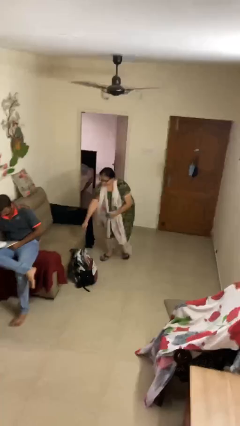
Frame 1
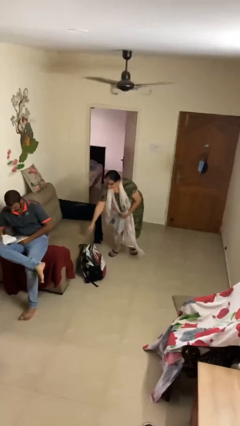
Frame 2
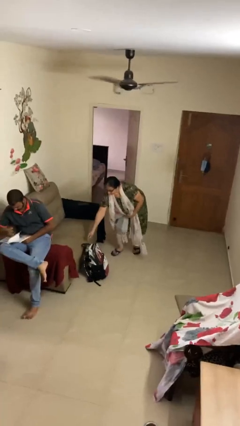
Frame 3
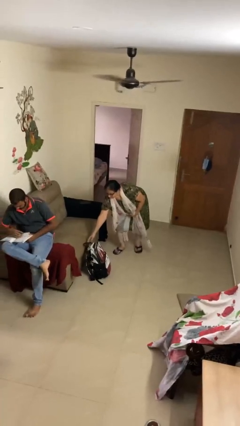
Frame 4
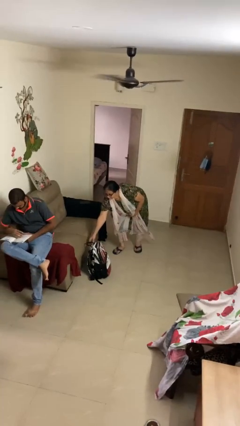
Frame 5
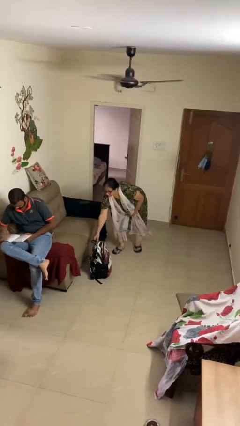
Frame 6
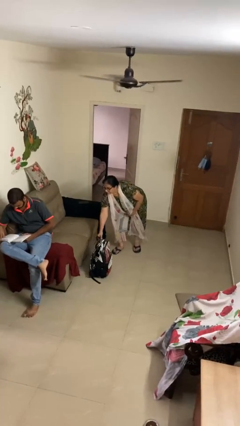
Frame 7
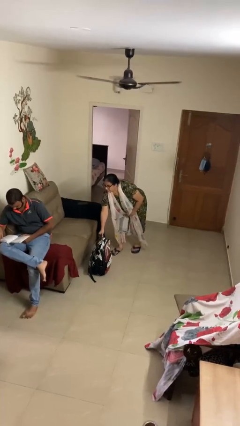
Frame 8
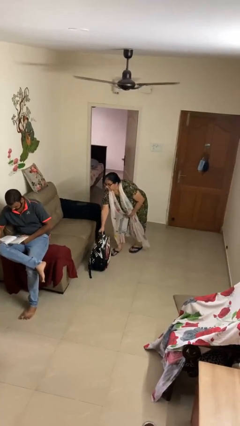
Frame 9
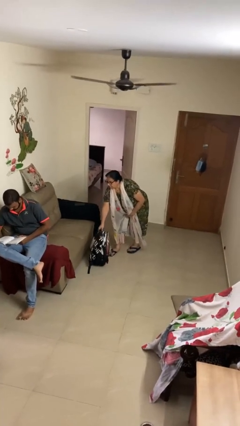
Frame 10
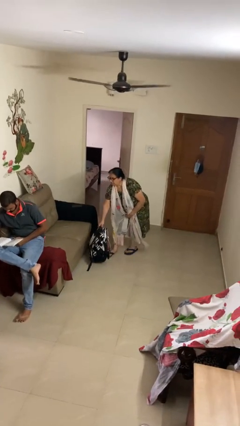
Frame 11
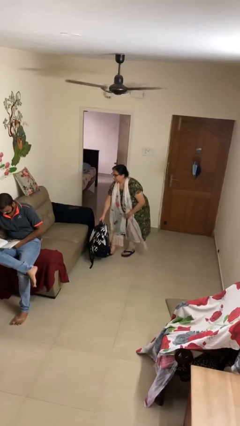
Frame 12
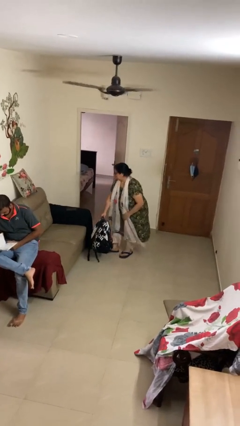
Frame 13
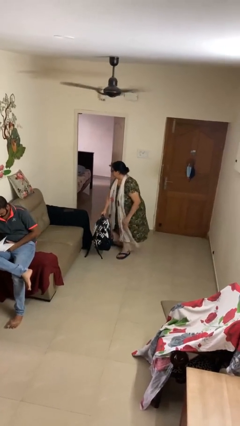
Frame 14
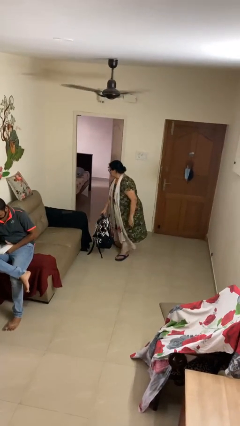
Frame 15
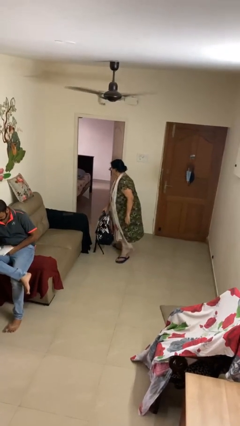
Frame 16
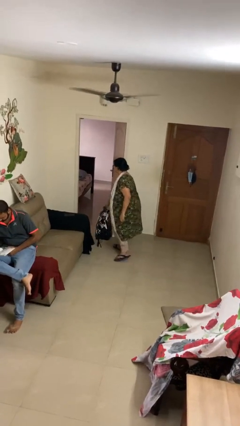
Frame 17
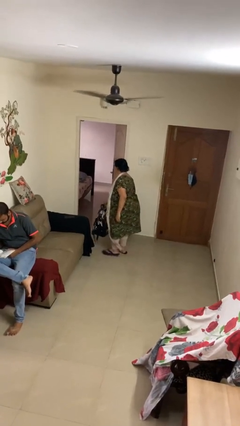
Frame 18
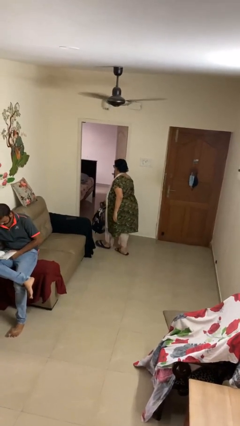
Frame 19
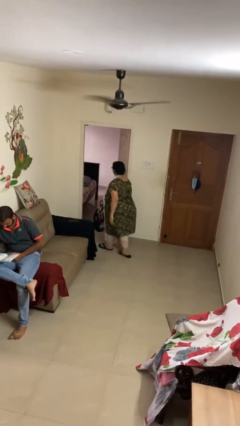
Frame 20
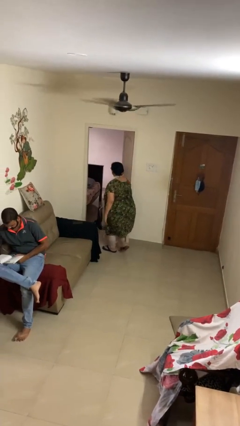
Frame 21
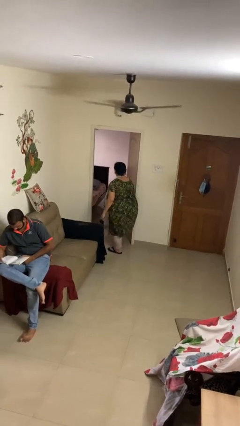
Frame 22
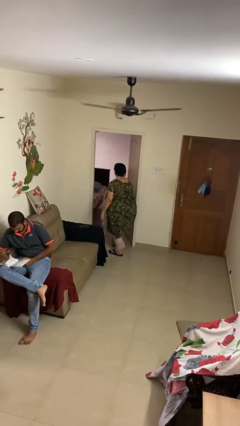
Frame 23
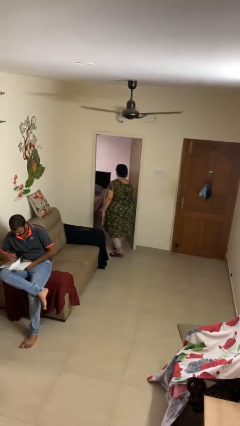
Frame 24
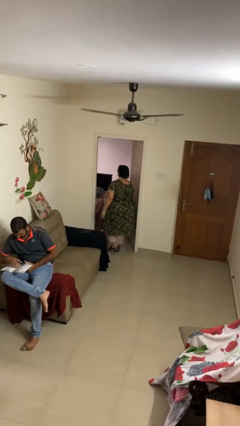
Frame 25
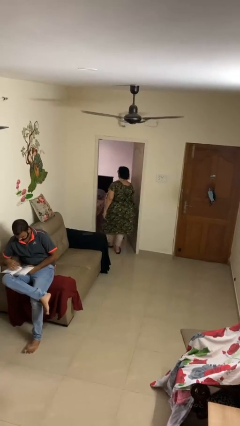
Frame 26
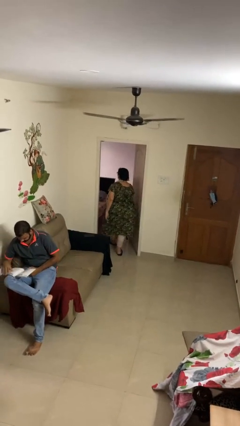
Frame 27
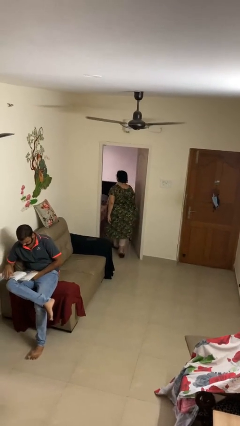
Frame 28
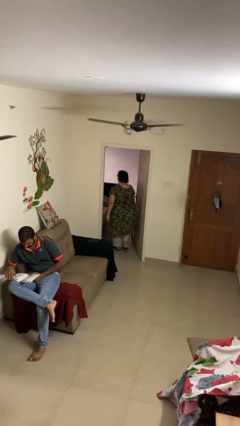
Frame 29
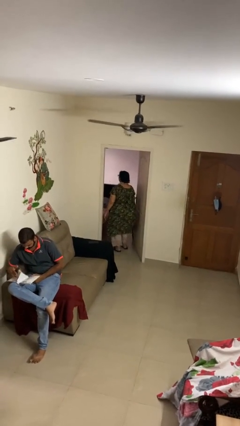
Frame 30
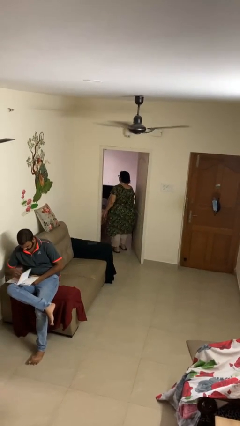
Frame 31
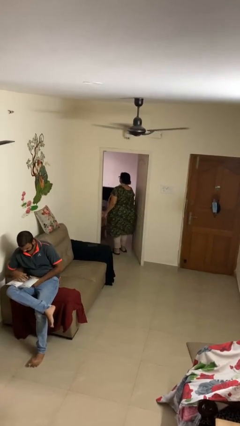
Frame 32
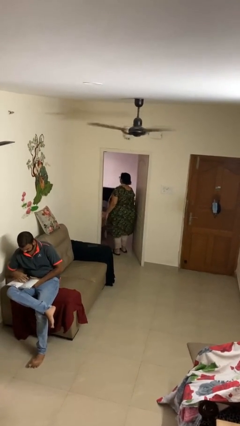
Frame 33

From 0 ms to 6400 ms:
person steals object from person

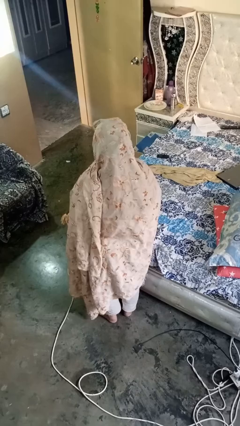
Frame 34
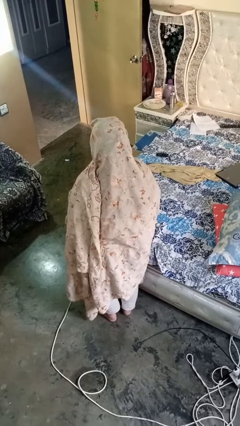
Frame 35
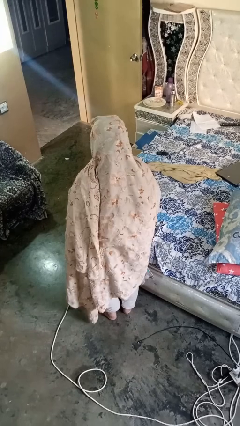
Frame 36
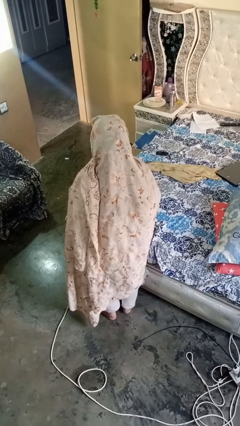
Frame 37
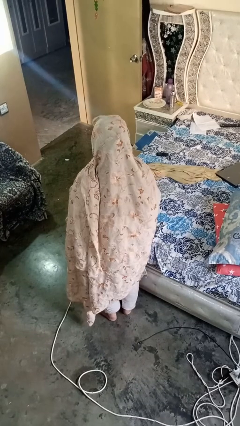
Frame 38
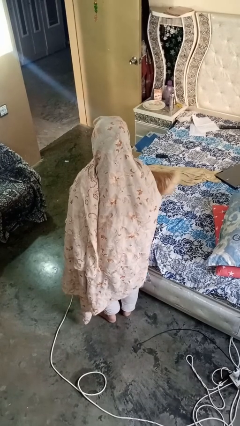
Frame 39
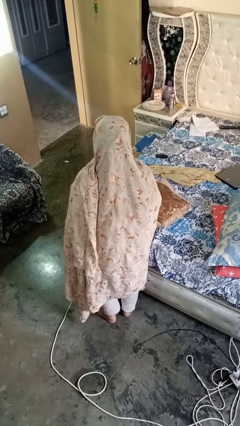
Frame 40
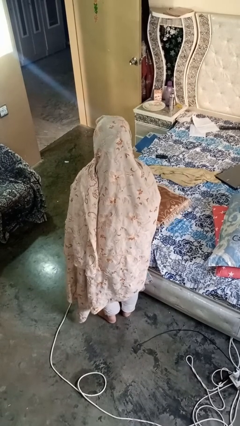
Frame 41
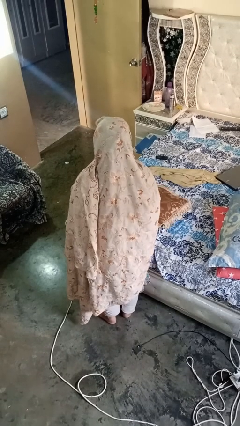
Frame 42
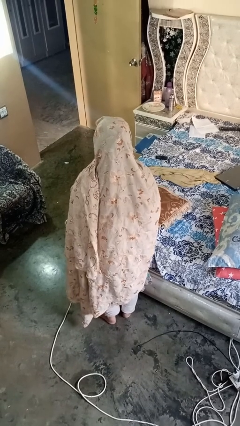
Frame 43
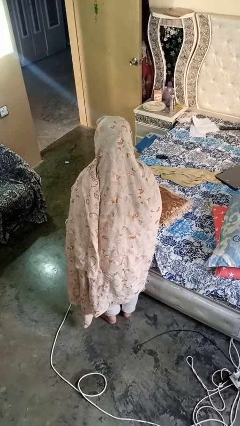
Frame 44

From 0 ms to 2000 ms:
person puts down object on bed

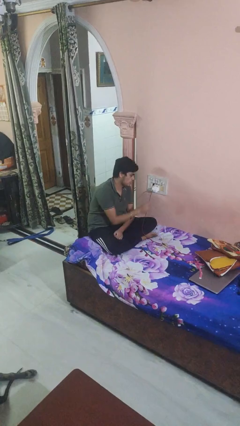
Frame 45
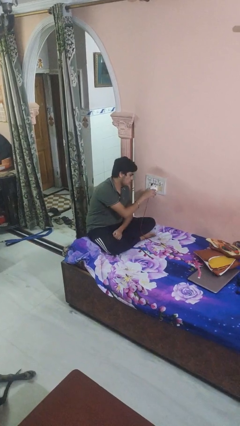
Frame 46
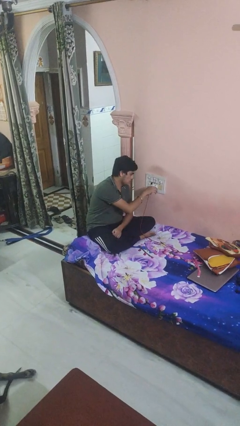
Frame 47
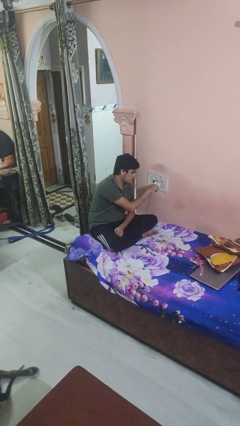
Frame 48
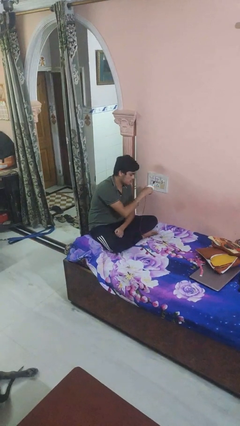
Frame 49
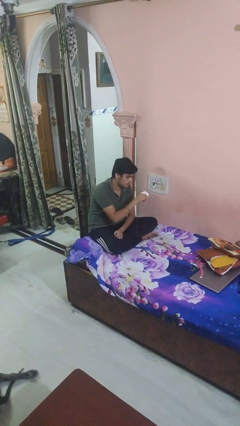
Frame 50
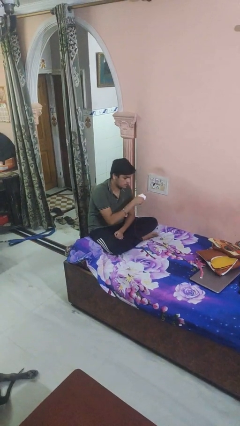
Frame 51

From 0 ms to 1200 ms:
person unplugs from electrical socket

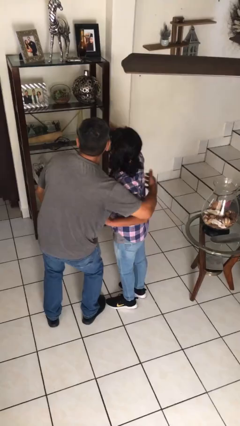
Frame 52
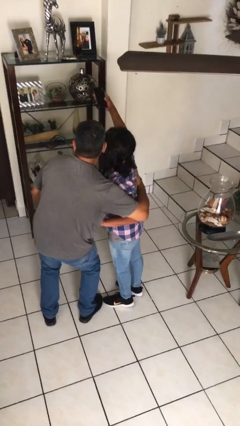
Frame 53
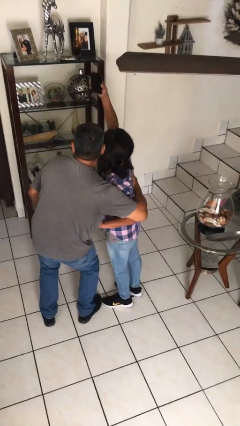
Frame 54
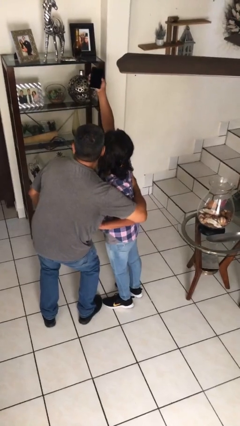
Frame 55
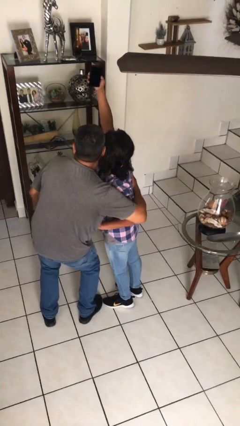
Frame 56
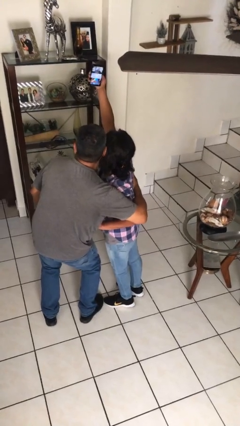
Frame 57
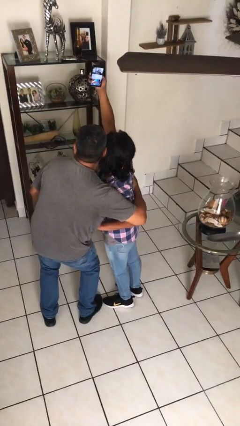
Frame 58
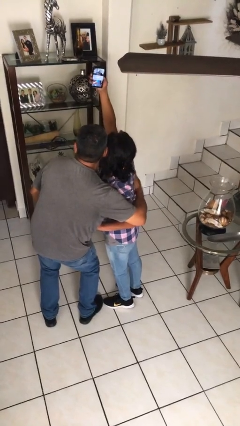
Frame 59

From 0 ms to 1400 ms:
person takes selfie with person

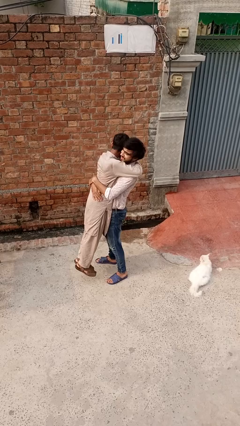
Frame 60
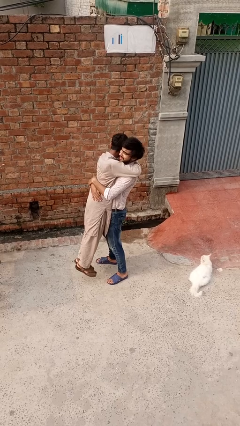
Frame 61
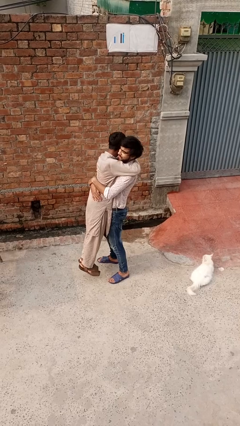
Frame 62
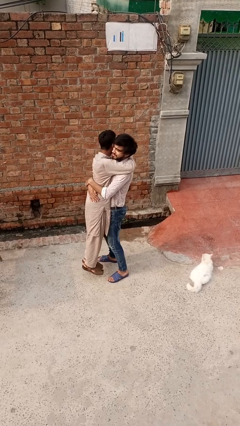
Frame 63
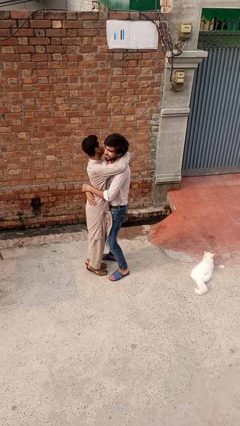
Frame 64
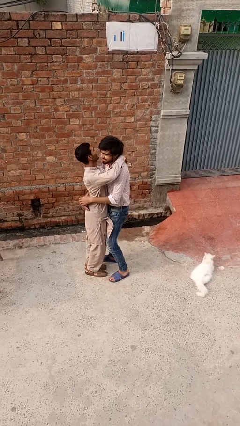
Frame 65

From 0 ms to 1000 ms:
person puts down person

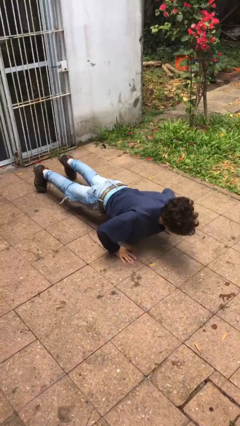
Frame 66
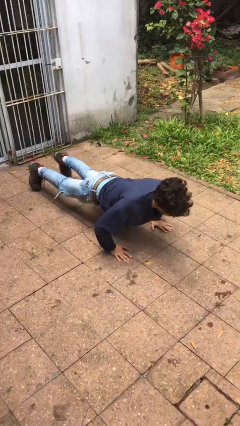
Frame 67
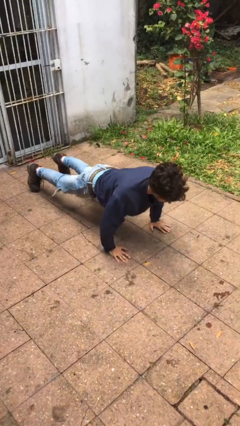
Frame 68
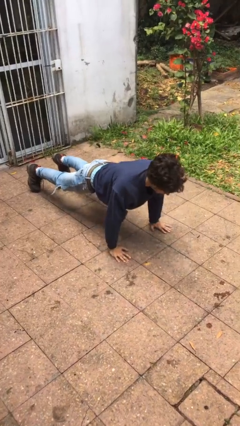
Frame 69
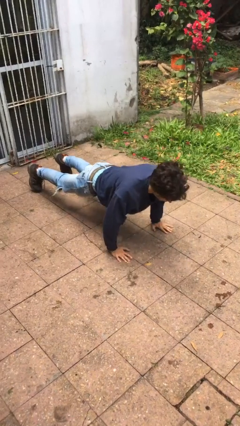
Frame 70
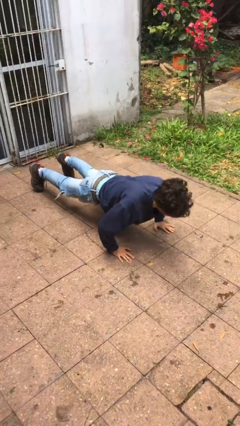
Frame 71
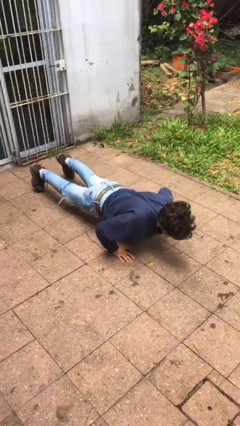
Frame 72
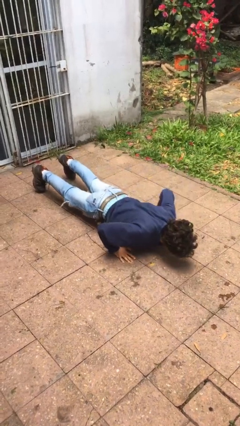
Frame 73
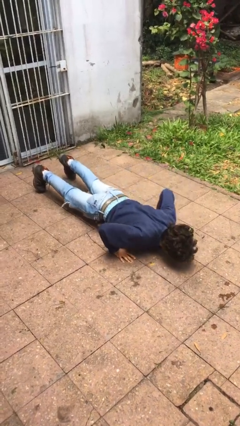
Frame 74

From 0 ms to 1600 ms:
person exercises with pushup

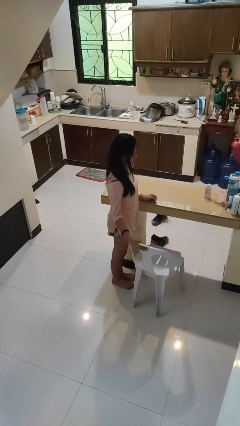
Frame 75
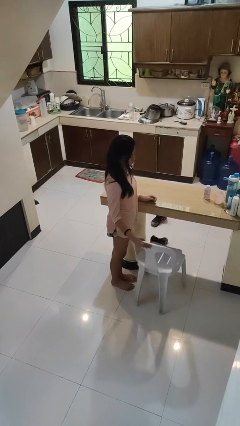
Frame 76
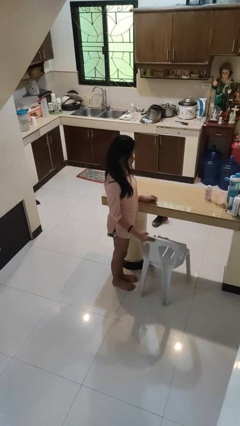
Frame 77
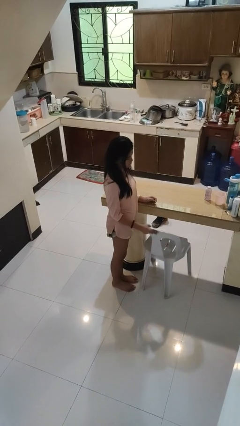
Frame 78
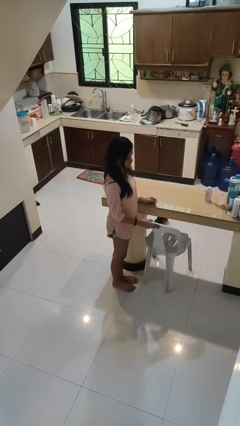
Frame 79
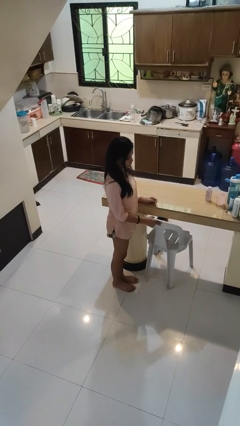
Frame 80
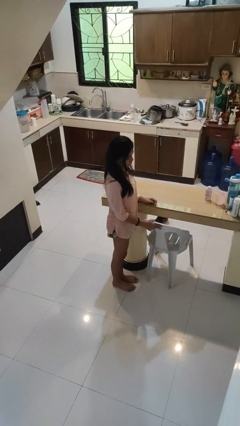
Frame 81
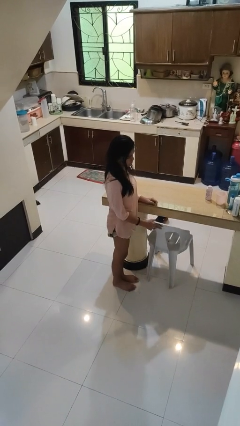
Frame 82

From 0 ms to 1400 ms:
person pushes in chair

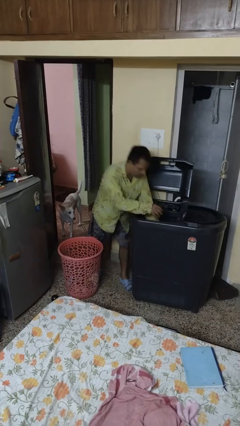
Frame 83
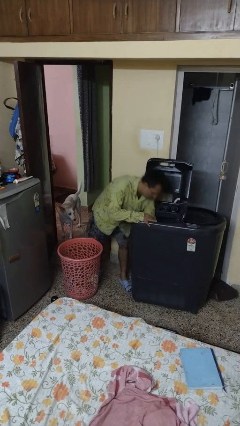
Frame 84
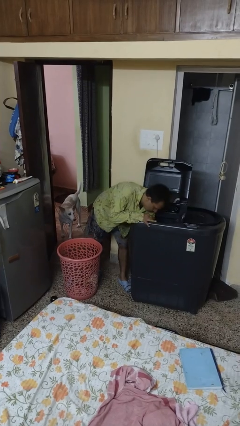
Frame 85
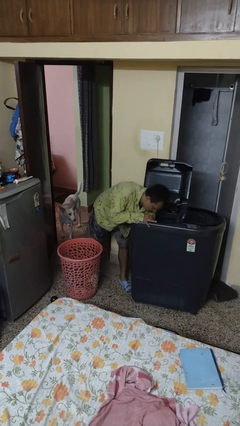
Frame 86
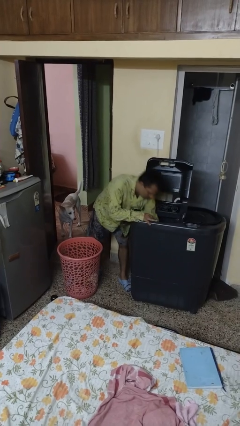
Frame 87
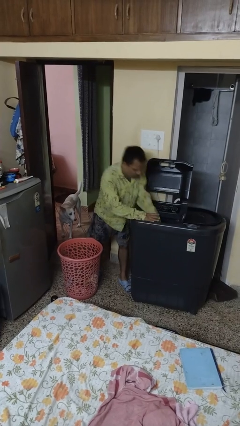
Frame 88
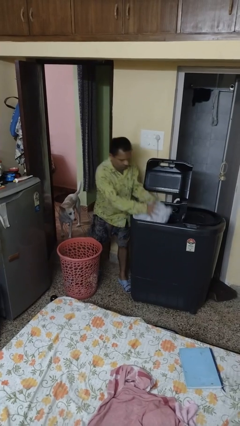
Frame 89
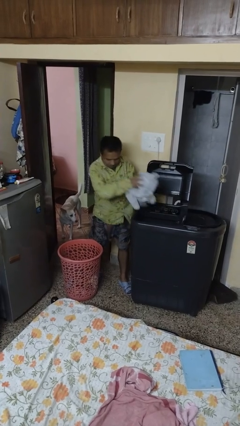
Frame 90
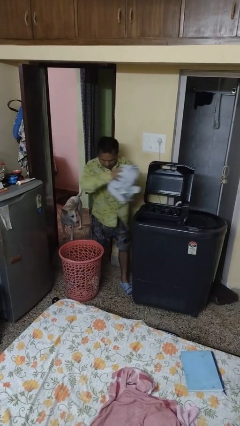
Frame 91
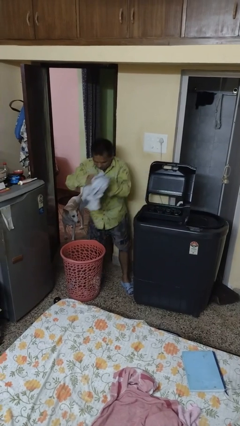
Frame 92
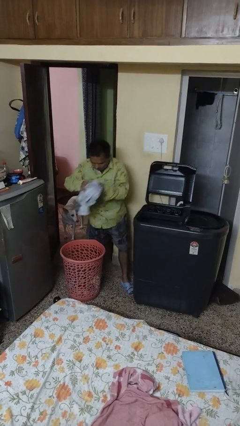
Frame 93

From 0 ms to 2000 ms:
person unloads clotheswasher
